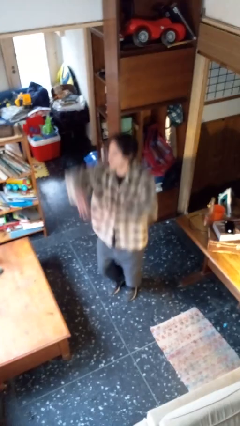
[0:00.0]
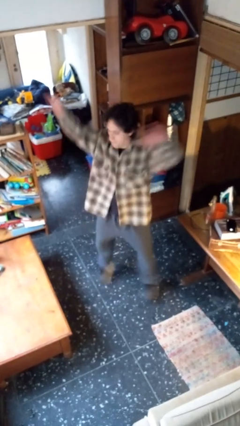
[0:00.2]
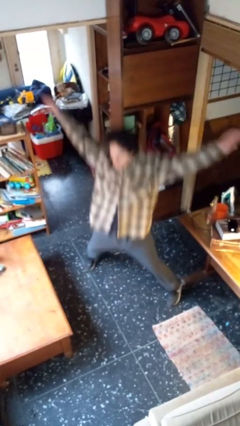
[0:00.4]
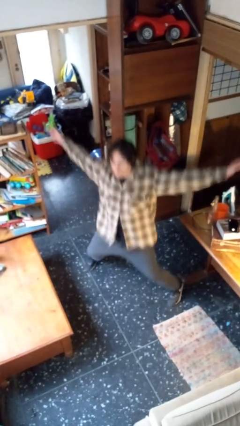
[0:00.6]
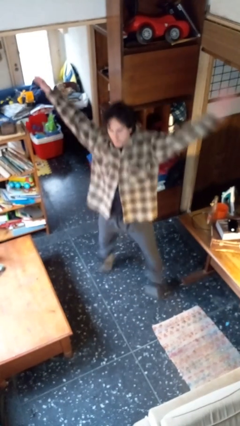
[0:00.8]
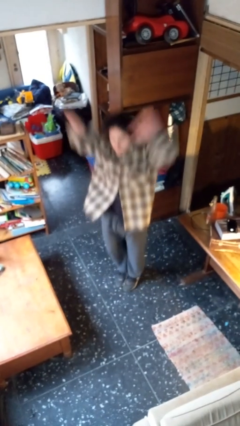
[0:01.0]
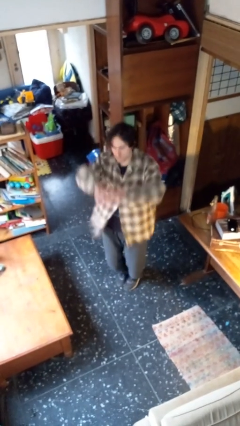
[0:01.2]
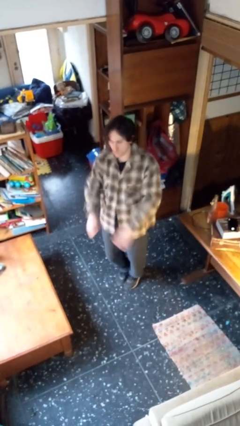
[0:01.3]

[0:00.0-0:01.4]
person exercises with jumping jacks

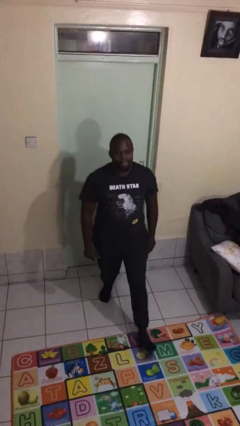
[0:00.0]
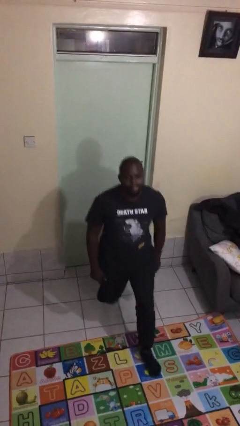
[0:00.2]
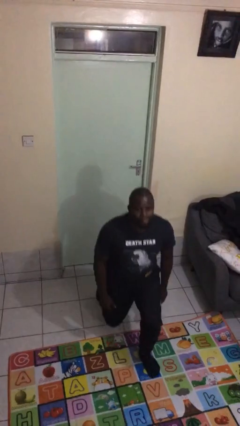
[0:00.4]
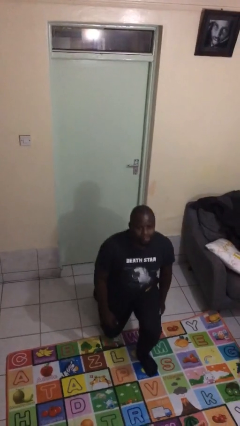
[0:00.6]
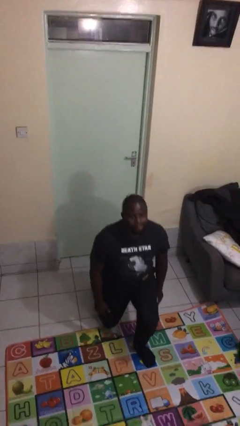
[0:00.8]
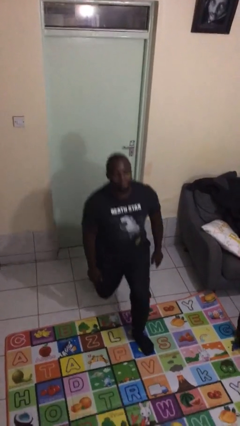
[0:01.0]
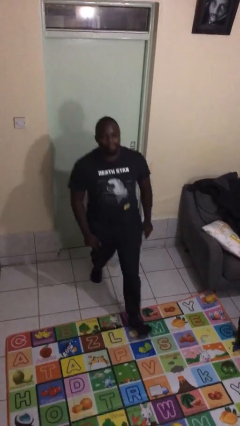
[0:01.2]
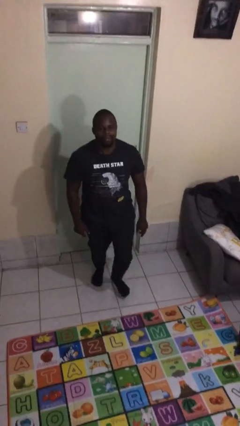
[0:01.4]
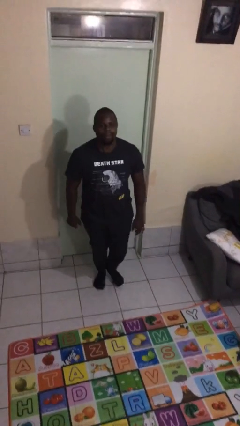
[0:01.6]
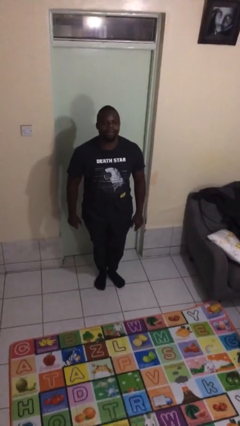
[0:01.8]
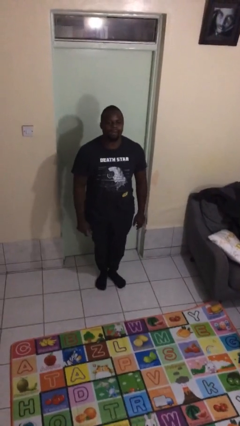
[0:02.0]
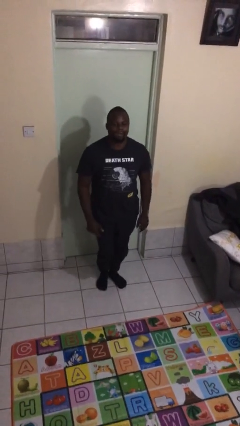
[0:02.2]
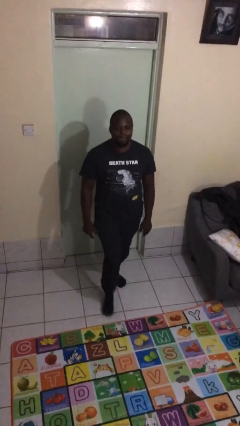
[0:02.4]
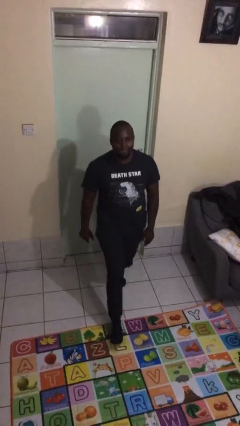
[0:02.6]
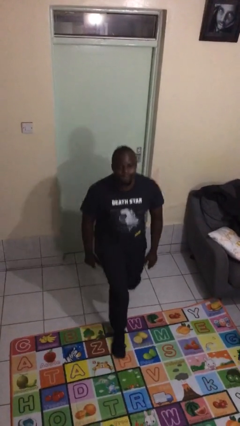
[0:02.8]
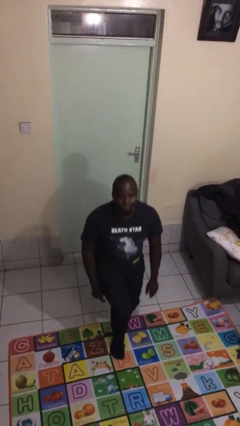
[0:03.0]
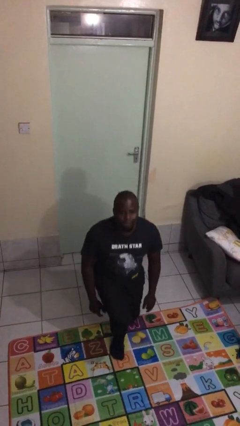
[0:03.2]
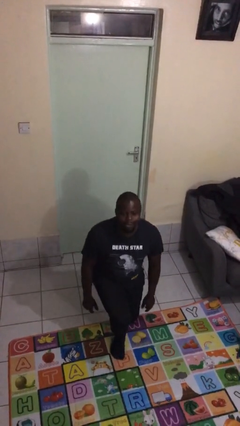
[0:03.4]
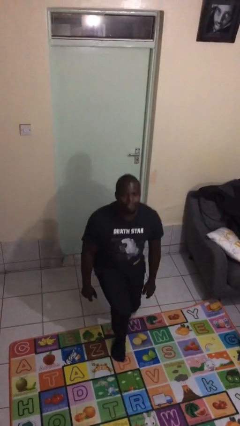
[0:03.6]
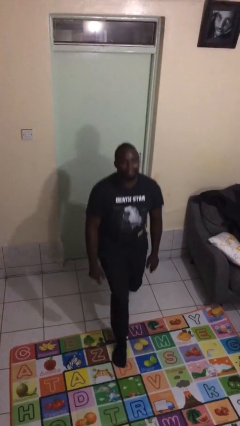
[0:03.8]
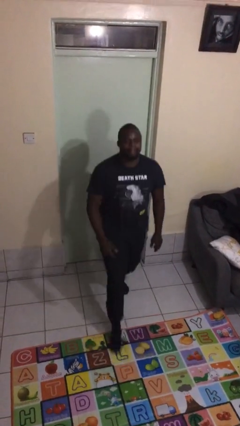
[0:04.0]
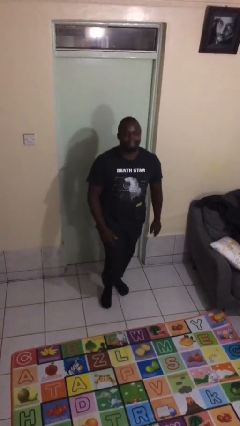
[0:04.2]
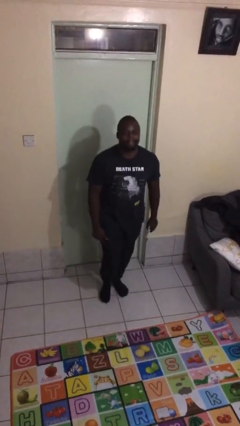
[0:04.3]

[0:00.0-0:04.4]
person exercises with lunges

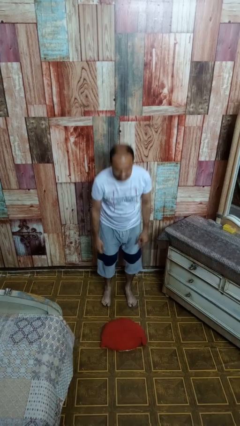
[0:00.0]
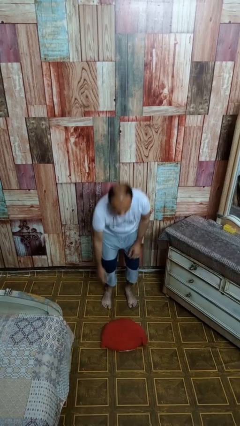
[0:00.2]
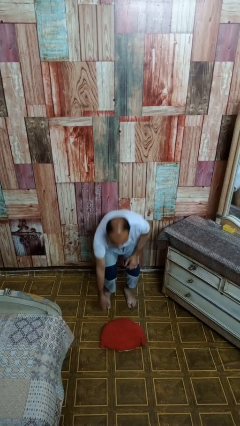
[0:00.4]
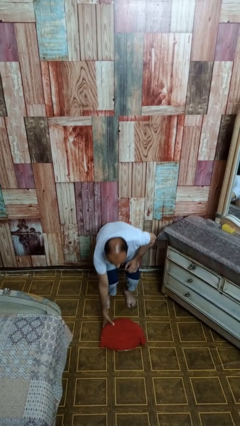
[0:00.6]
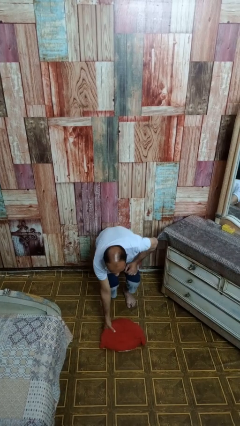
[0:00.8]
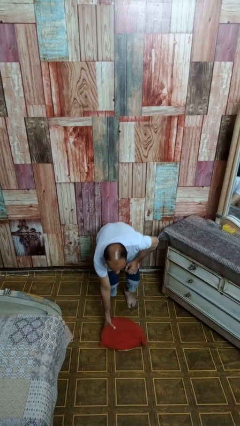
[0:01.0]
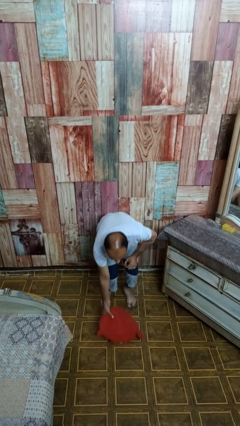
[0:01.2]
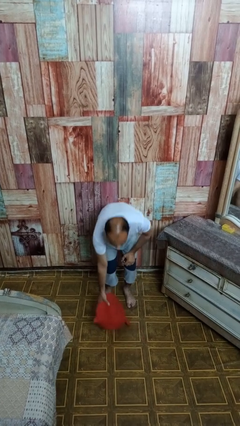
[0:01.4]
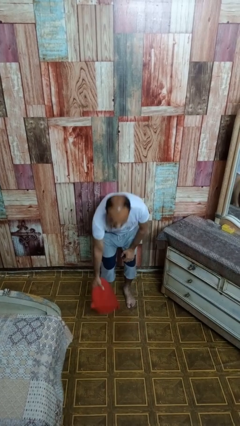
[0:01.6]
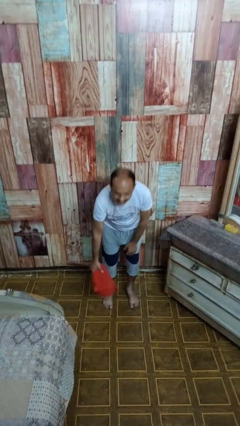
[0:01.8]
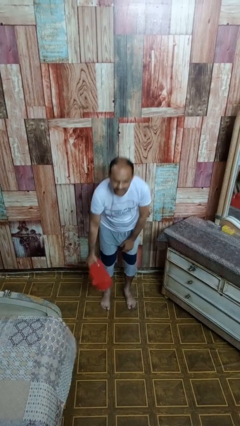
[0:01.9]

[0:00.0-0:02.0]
person picks up object from floor

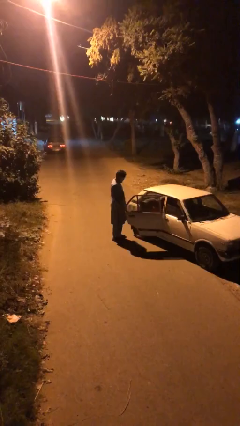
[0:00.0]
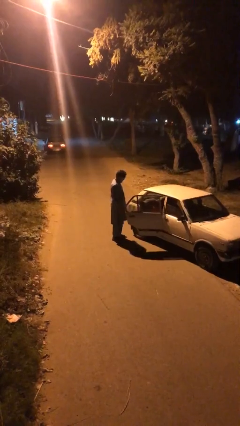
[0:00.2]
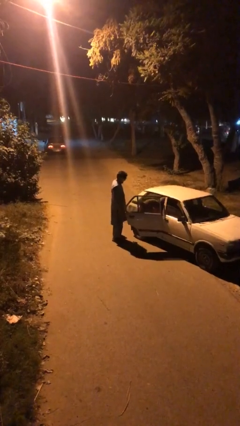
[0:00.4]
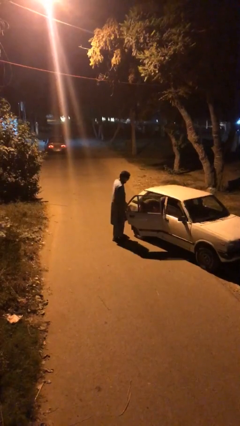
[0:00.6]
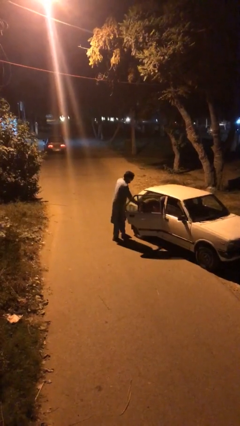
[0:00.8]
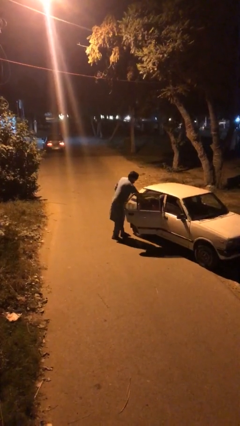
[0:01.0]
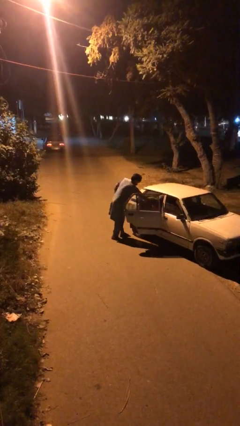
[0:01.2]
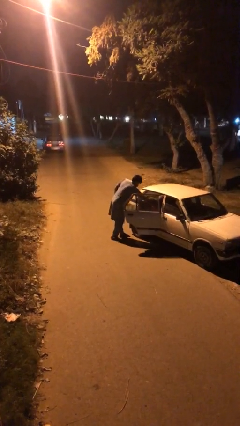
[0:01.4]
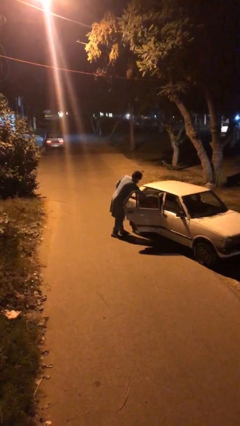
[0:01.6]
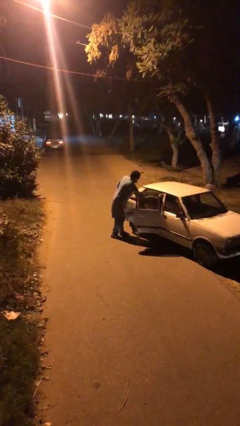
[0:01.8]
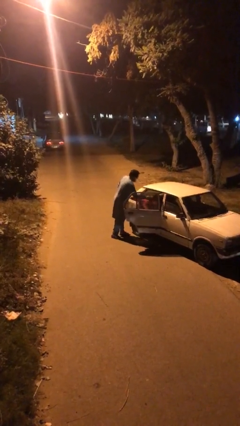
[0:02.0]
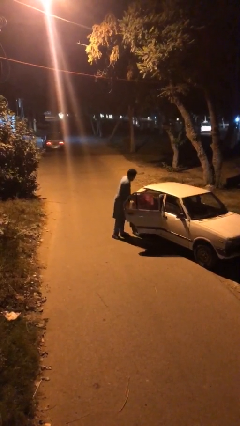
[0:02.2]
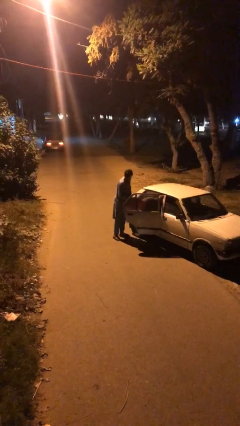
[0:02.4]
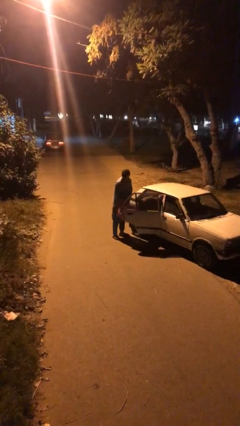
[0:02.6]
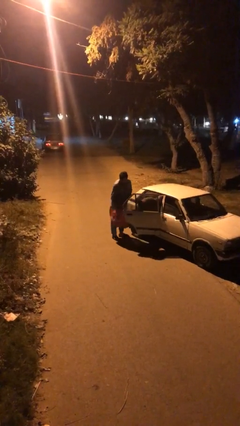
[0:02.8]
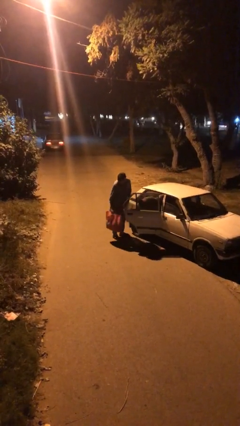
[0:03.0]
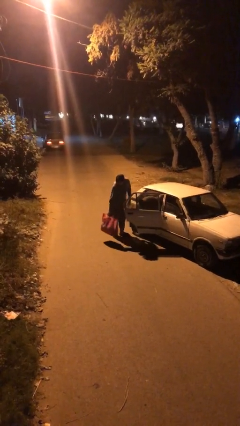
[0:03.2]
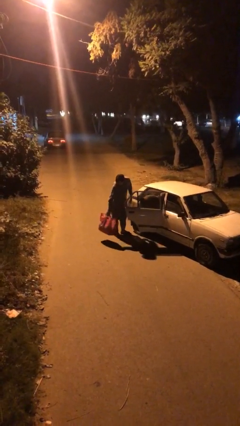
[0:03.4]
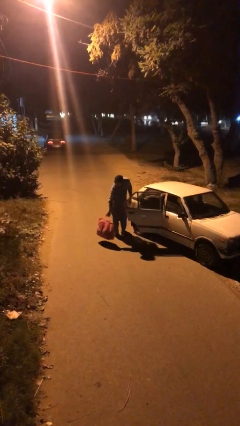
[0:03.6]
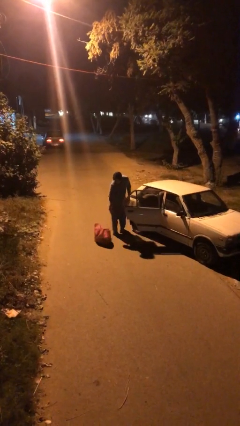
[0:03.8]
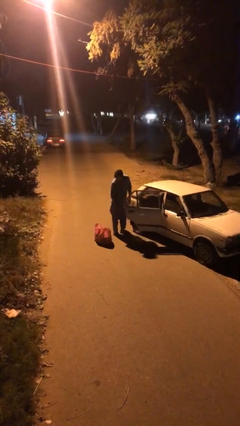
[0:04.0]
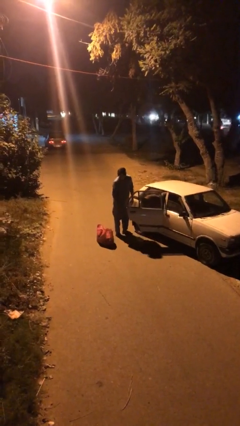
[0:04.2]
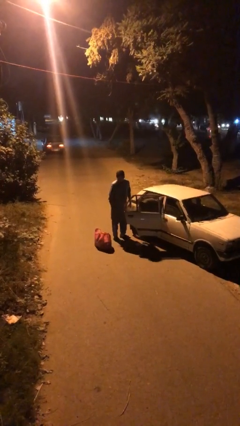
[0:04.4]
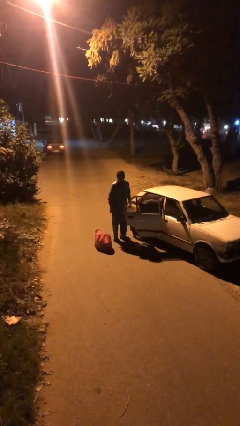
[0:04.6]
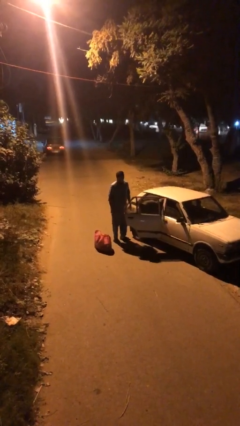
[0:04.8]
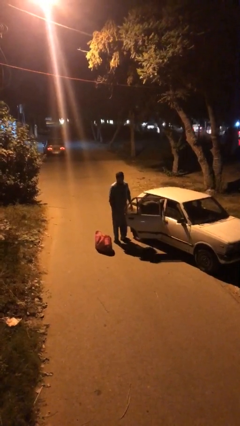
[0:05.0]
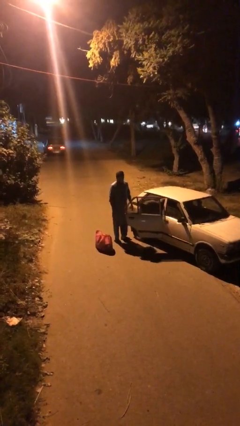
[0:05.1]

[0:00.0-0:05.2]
person unloads car

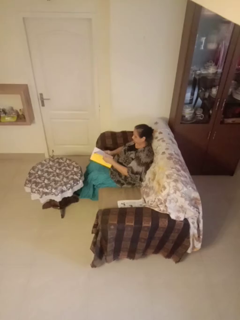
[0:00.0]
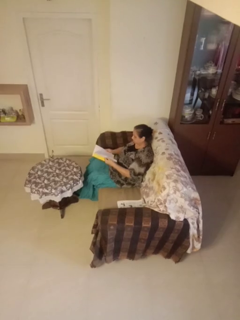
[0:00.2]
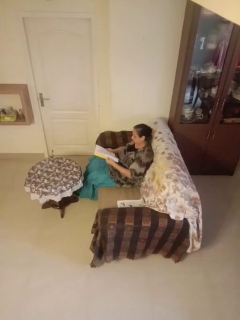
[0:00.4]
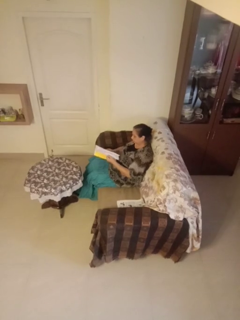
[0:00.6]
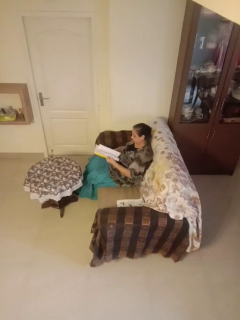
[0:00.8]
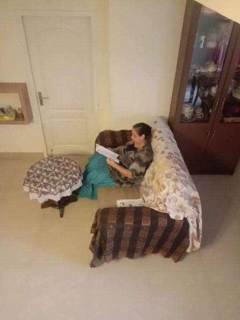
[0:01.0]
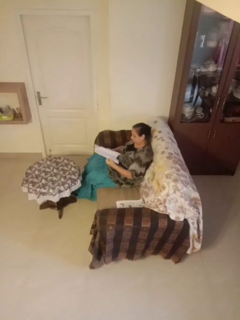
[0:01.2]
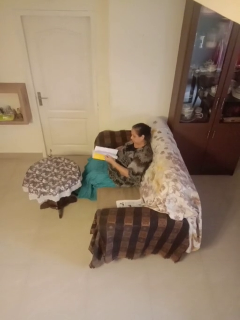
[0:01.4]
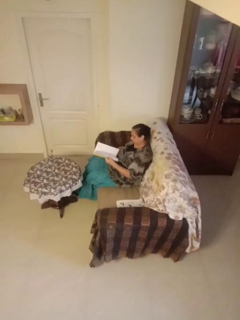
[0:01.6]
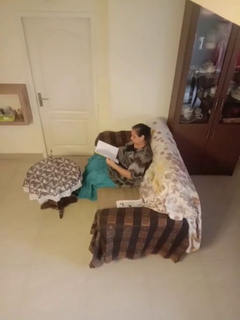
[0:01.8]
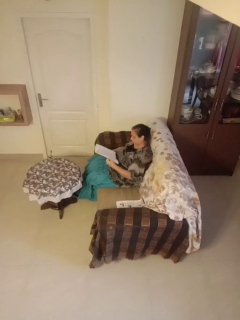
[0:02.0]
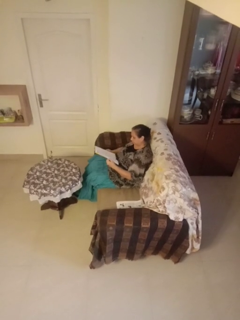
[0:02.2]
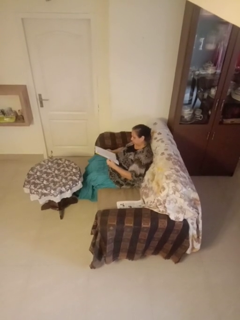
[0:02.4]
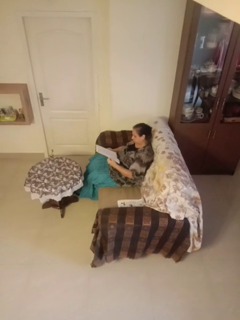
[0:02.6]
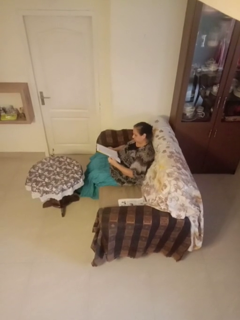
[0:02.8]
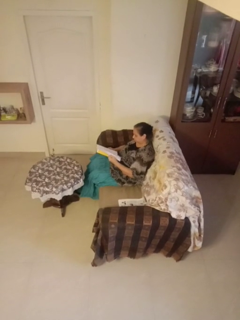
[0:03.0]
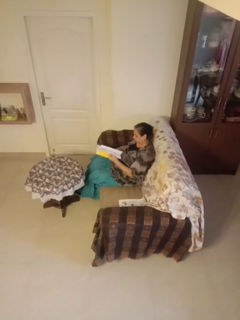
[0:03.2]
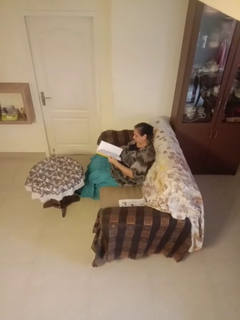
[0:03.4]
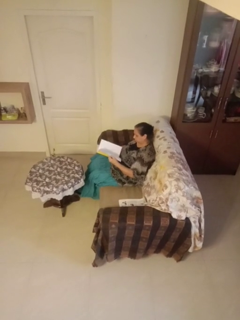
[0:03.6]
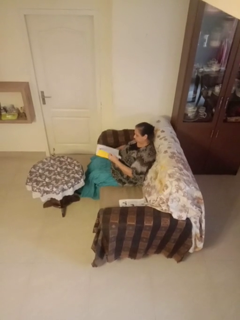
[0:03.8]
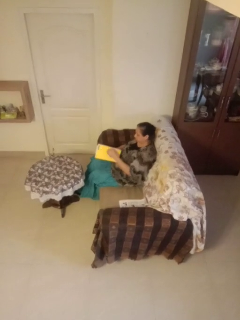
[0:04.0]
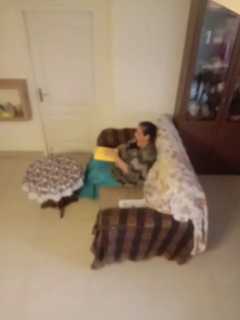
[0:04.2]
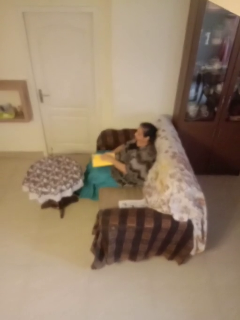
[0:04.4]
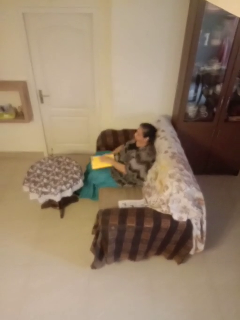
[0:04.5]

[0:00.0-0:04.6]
person reads magazine

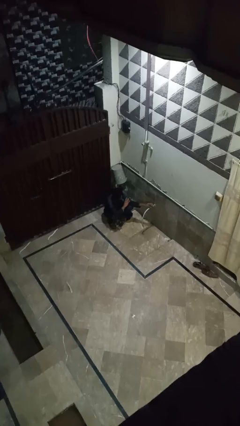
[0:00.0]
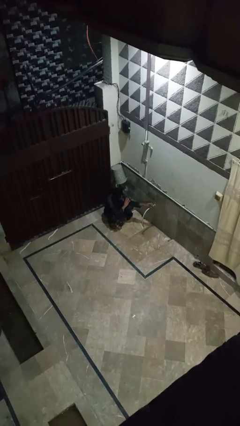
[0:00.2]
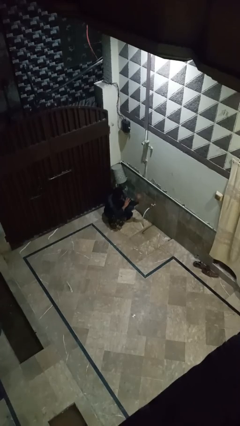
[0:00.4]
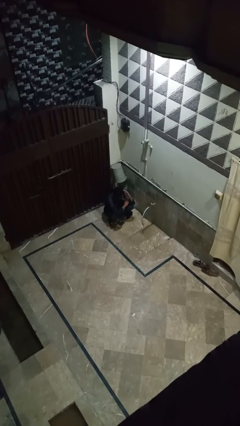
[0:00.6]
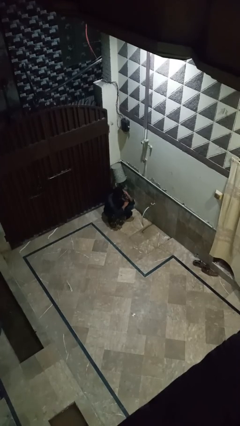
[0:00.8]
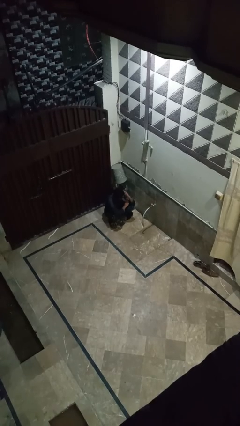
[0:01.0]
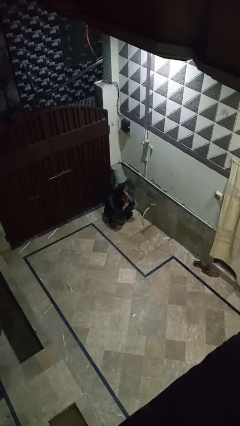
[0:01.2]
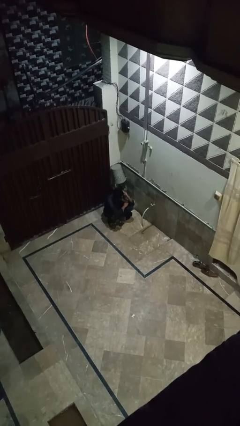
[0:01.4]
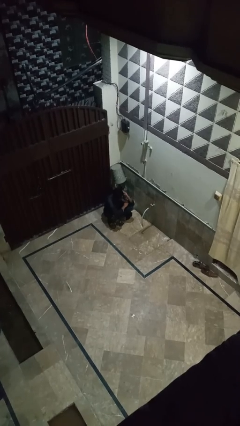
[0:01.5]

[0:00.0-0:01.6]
person turns off faucet
